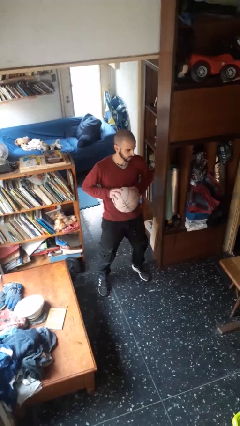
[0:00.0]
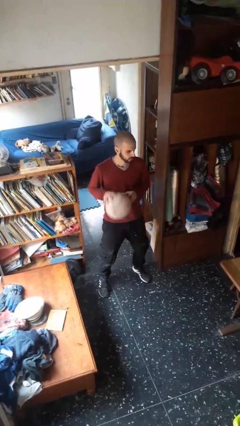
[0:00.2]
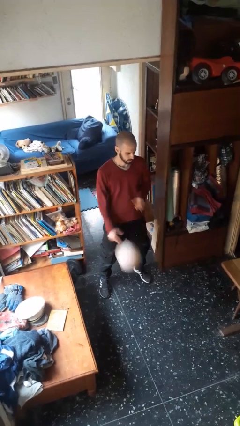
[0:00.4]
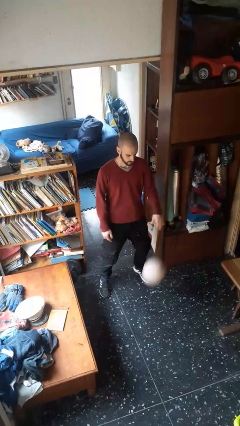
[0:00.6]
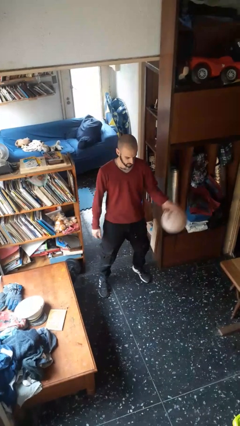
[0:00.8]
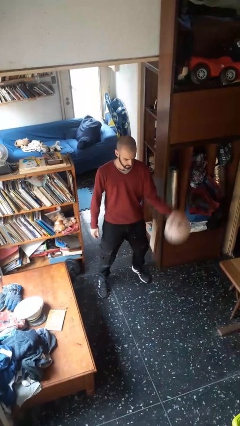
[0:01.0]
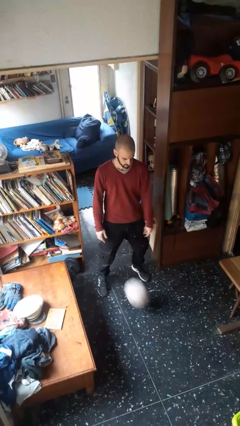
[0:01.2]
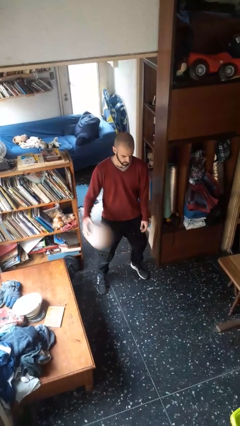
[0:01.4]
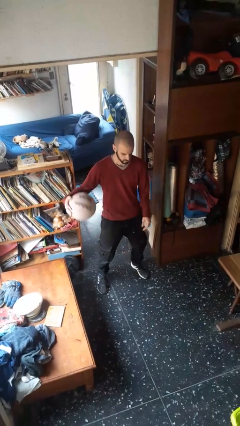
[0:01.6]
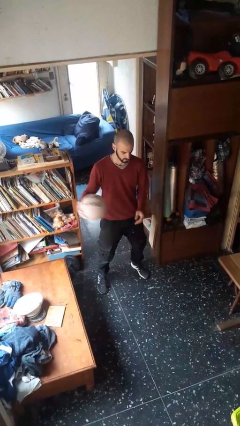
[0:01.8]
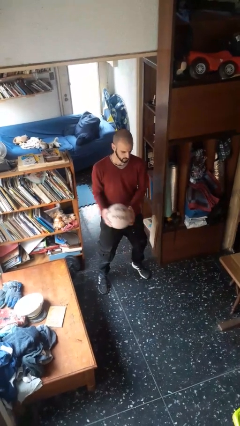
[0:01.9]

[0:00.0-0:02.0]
person bounces ball on floor

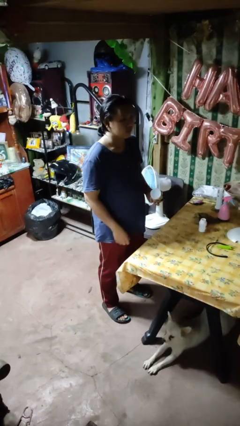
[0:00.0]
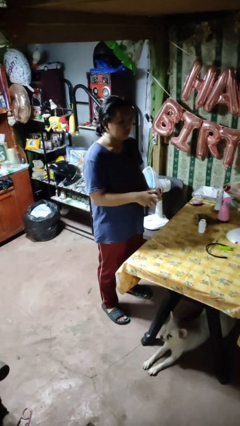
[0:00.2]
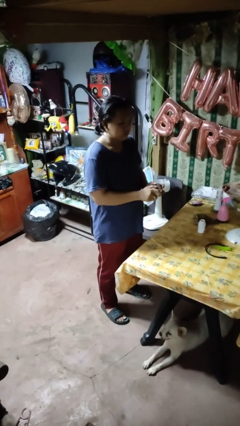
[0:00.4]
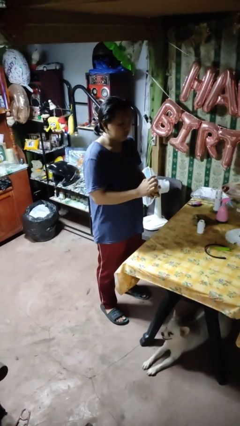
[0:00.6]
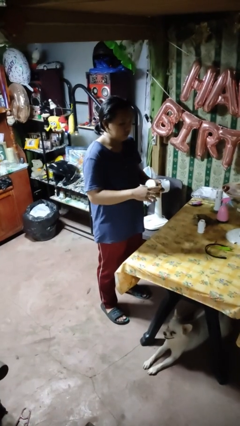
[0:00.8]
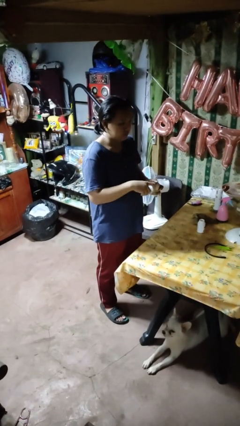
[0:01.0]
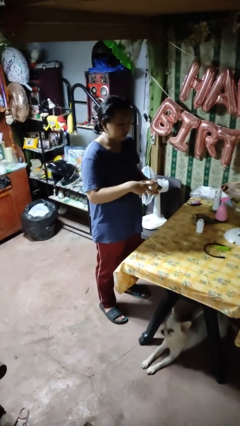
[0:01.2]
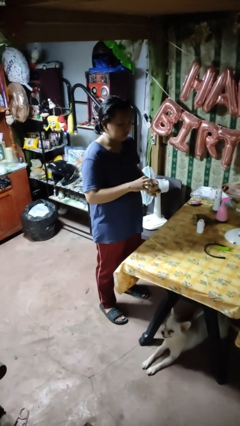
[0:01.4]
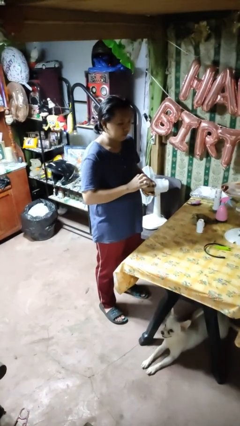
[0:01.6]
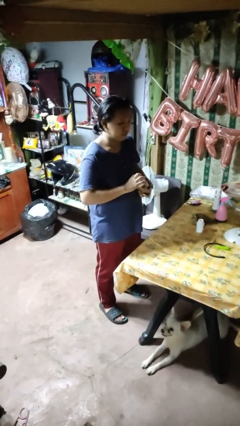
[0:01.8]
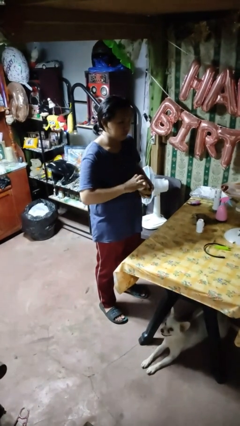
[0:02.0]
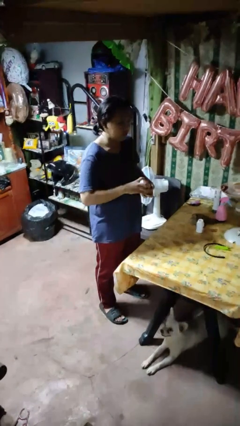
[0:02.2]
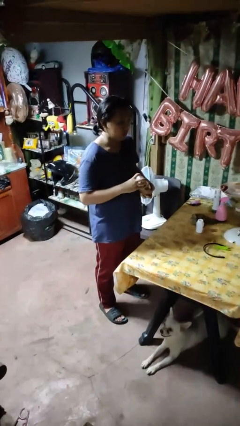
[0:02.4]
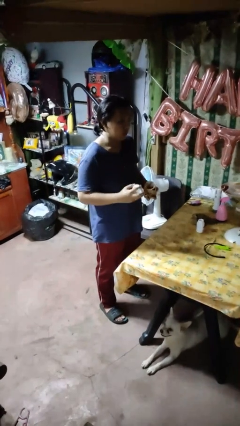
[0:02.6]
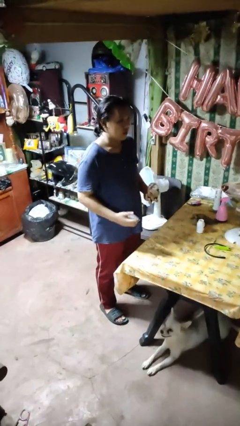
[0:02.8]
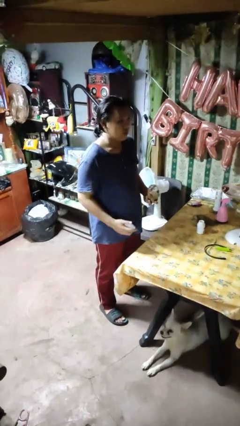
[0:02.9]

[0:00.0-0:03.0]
person opens jar

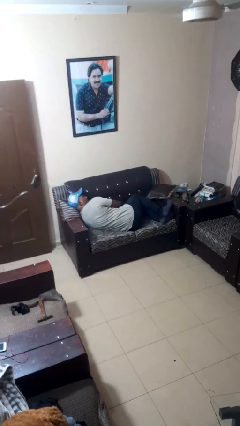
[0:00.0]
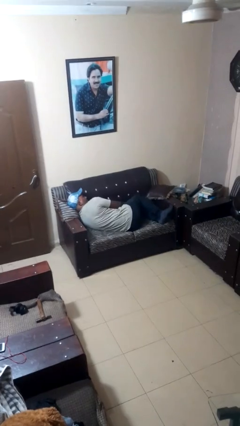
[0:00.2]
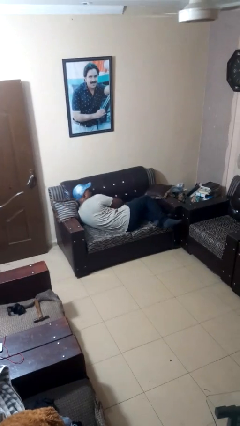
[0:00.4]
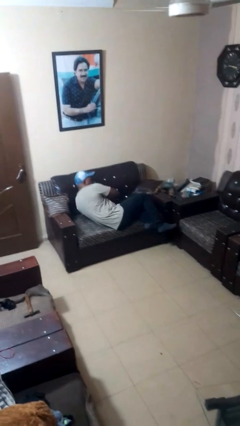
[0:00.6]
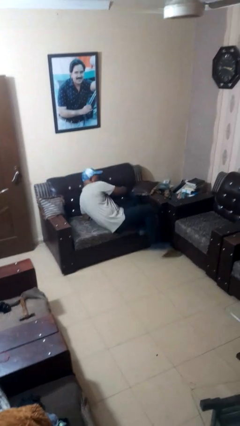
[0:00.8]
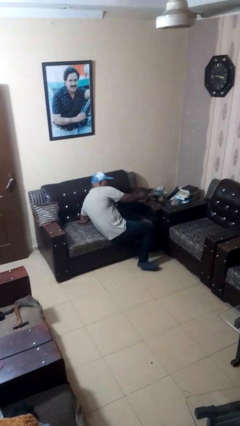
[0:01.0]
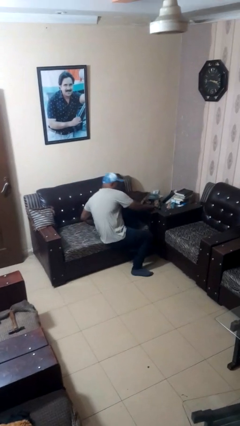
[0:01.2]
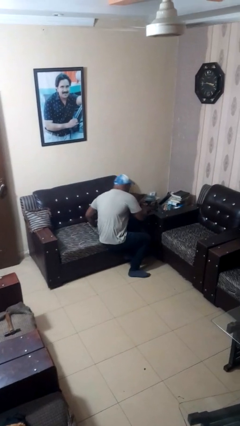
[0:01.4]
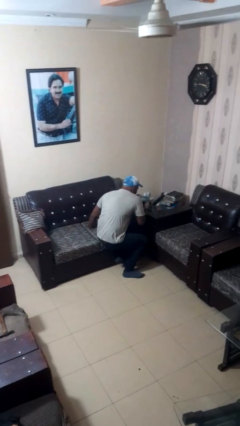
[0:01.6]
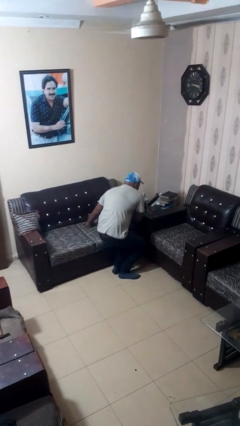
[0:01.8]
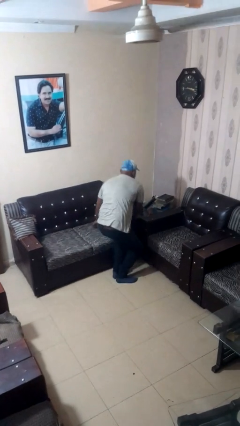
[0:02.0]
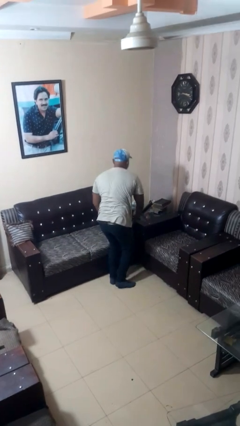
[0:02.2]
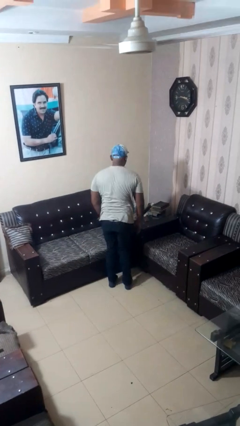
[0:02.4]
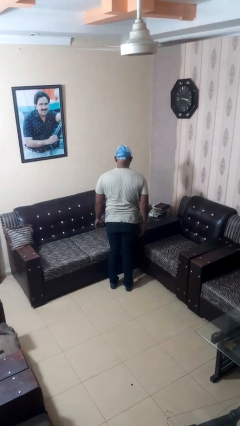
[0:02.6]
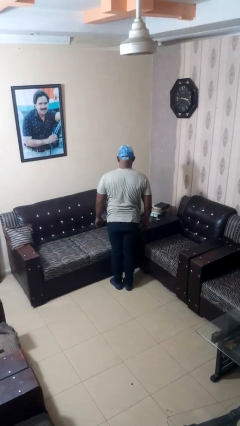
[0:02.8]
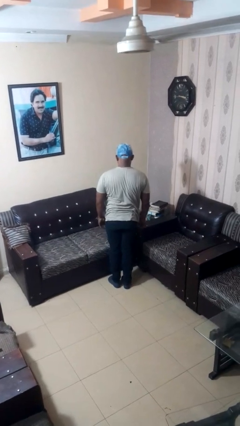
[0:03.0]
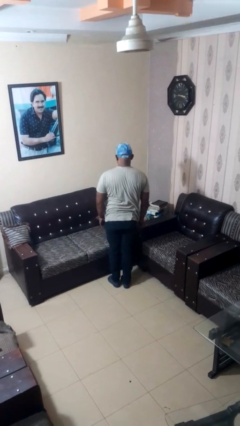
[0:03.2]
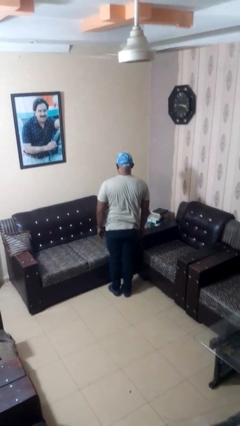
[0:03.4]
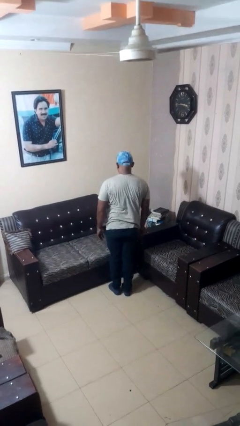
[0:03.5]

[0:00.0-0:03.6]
person stands up

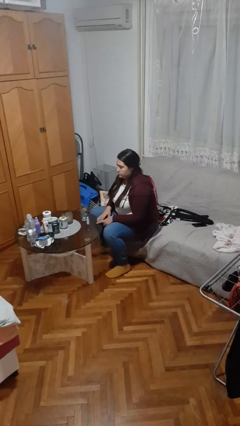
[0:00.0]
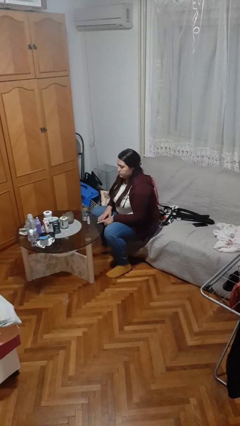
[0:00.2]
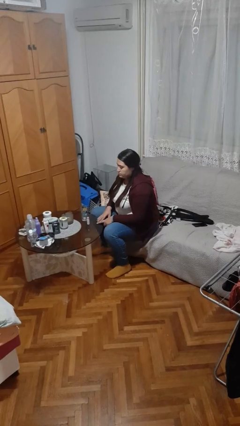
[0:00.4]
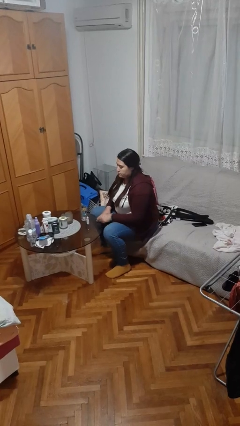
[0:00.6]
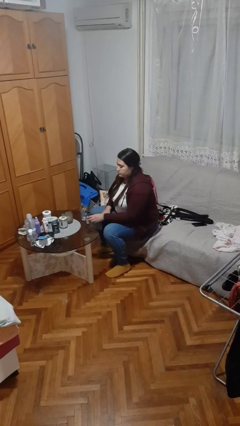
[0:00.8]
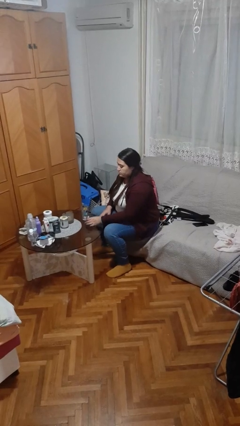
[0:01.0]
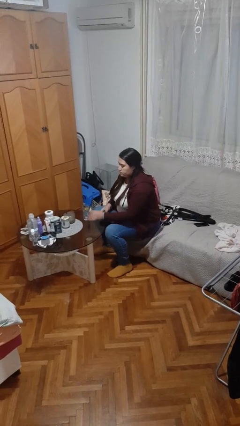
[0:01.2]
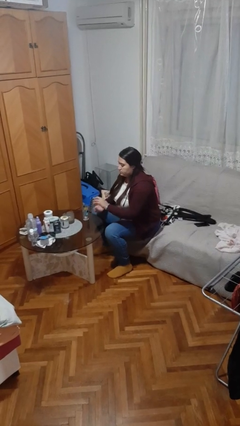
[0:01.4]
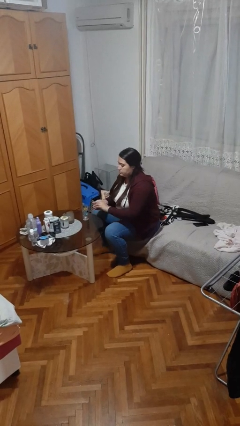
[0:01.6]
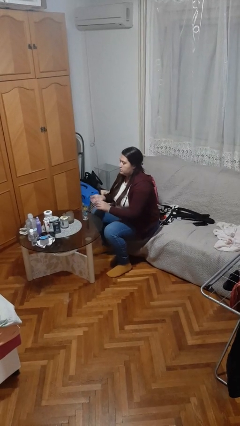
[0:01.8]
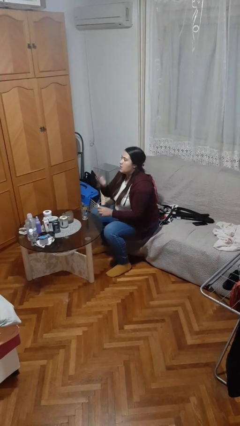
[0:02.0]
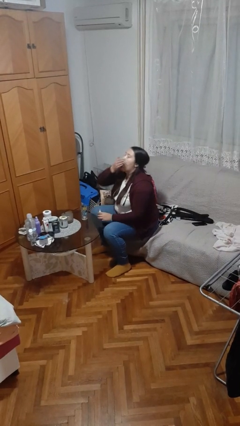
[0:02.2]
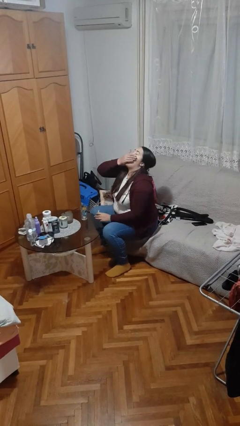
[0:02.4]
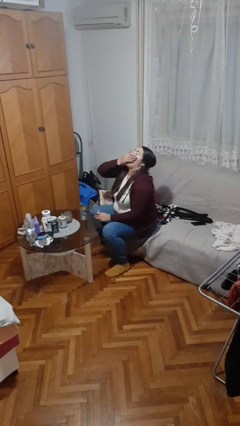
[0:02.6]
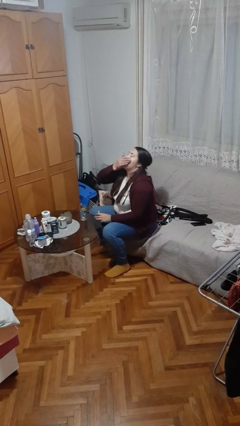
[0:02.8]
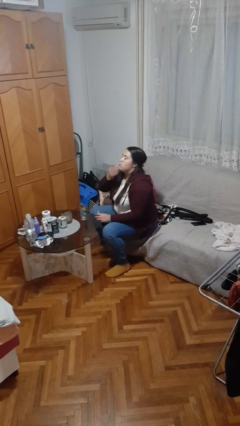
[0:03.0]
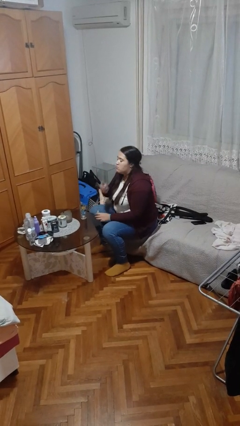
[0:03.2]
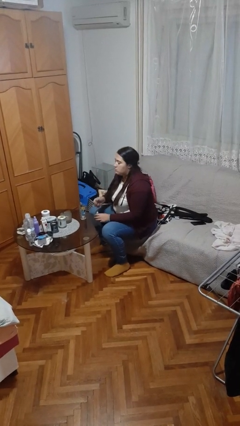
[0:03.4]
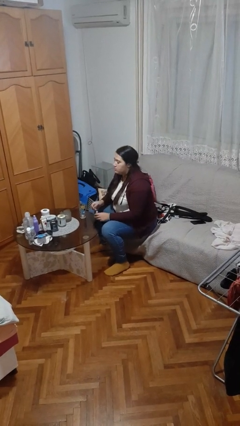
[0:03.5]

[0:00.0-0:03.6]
person takes medicine pills

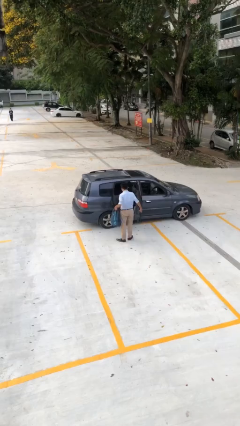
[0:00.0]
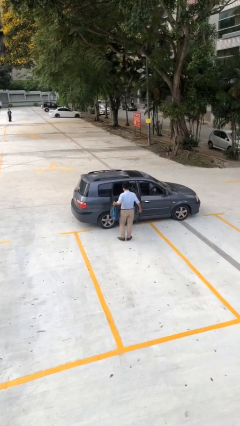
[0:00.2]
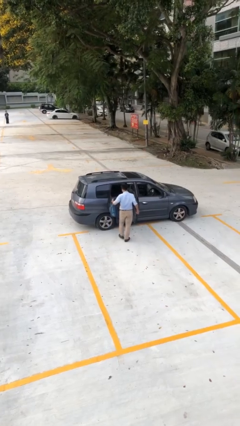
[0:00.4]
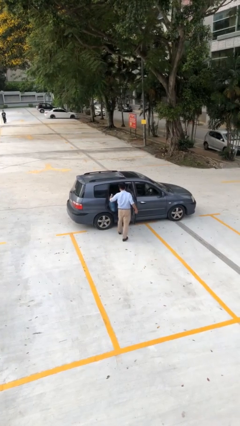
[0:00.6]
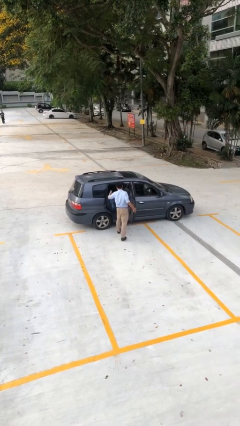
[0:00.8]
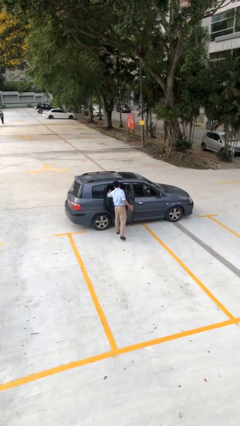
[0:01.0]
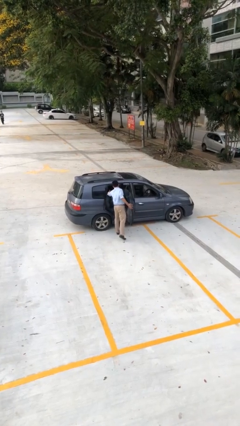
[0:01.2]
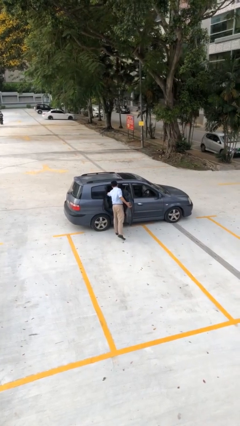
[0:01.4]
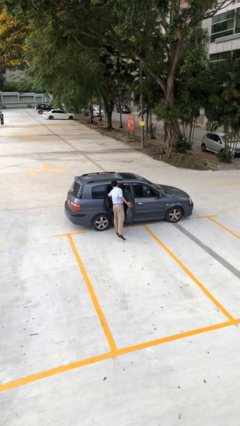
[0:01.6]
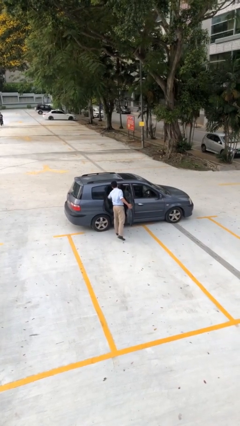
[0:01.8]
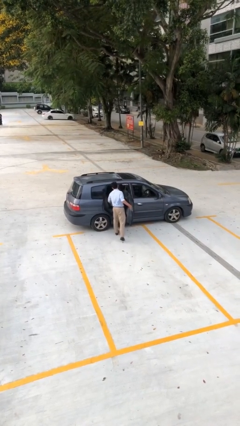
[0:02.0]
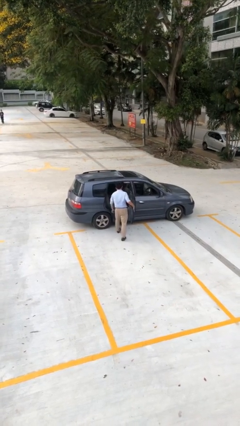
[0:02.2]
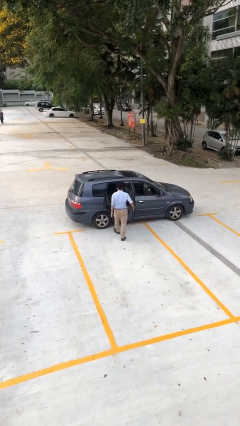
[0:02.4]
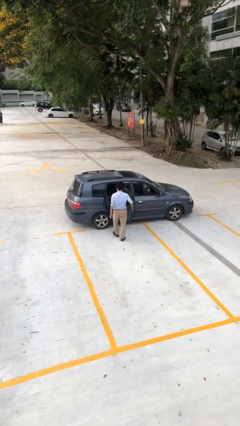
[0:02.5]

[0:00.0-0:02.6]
person loads car

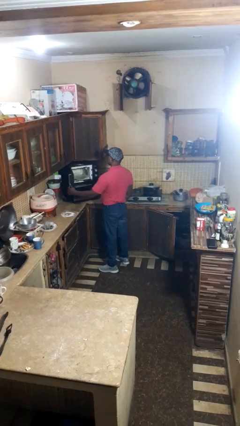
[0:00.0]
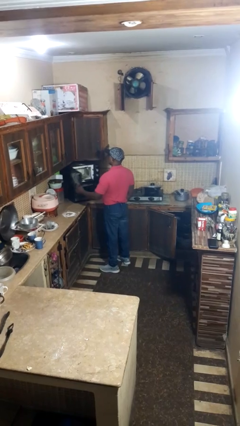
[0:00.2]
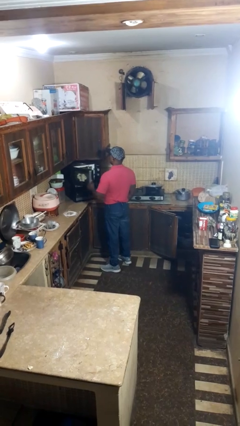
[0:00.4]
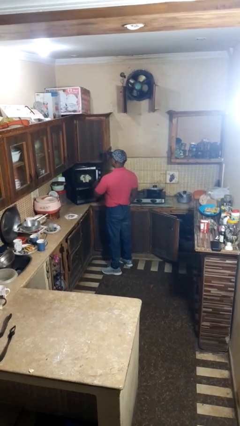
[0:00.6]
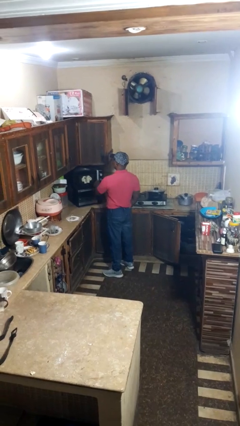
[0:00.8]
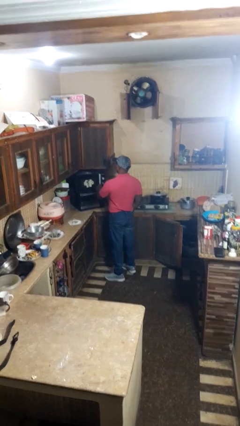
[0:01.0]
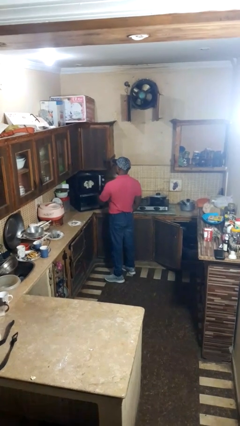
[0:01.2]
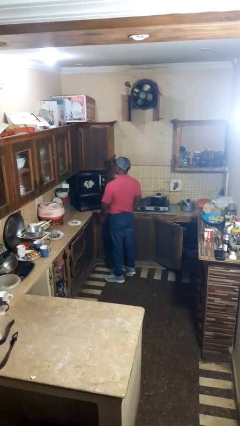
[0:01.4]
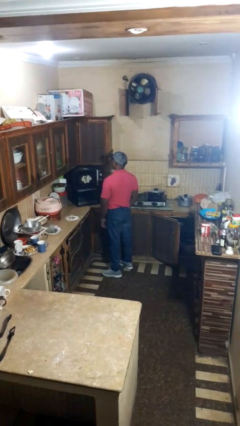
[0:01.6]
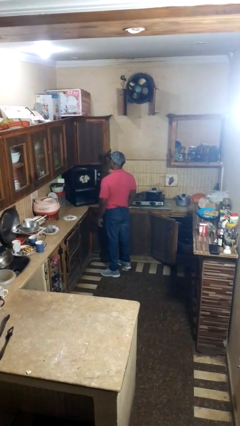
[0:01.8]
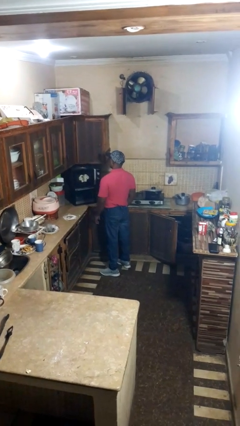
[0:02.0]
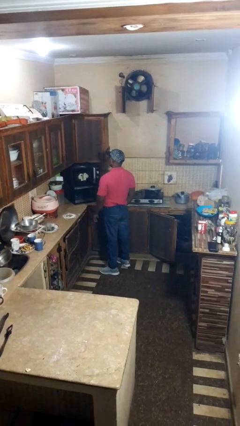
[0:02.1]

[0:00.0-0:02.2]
person closes microwave

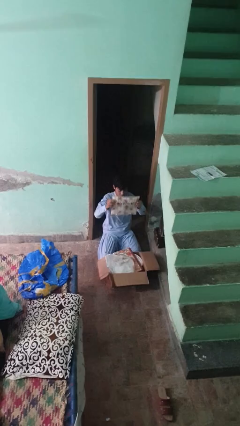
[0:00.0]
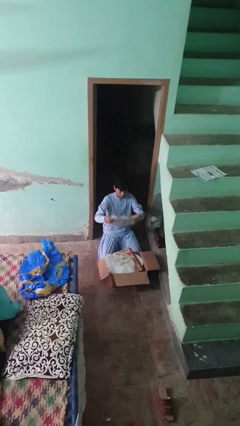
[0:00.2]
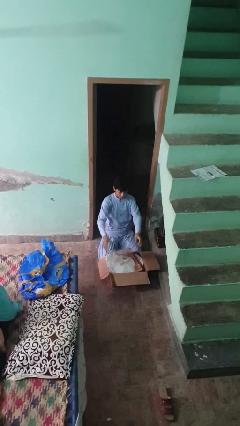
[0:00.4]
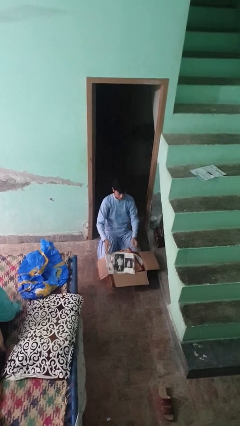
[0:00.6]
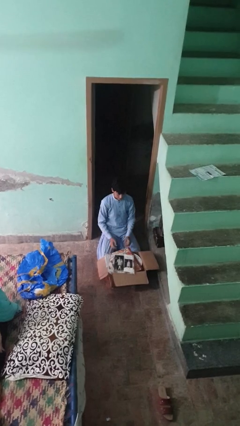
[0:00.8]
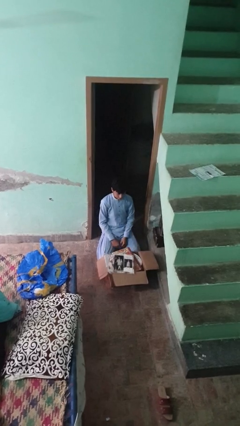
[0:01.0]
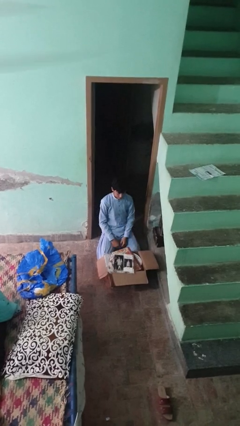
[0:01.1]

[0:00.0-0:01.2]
person puts object into box
